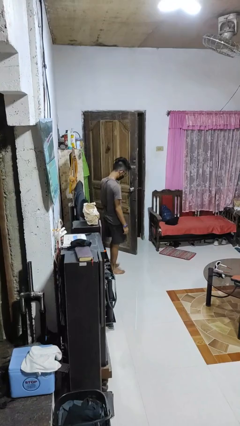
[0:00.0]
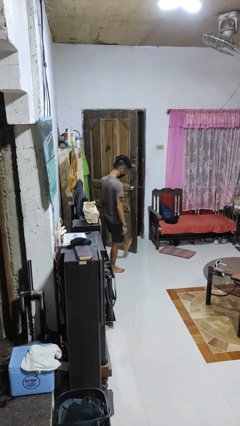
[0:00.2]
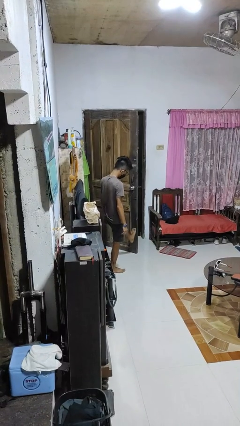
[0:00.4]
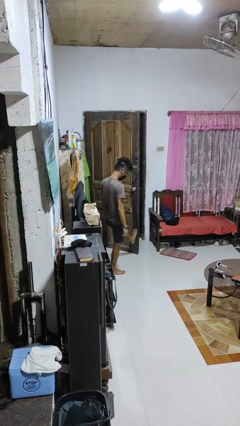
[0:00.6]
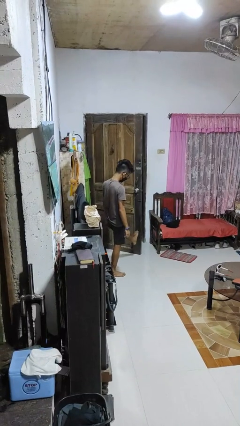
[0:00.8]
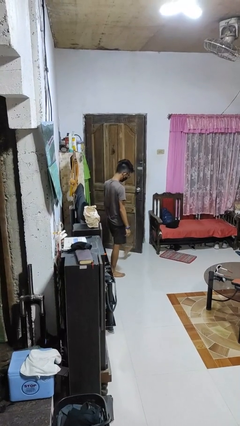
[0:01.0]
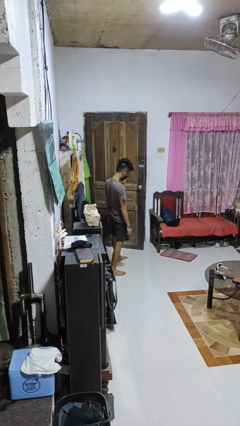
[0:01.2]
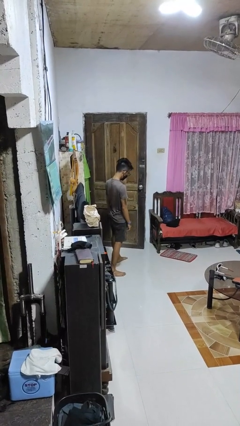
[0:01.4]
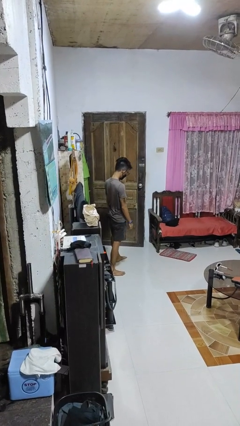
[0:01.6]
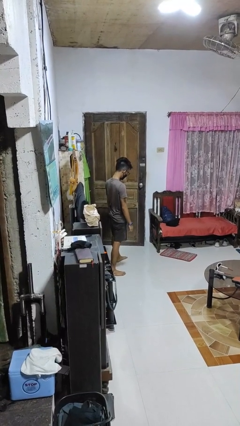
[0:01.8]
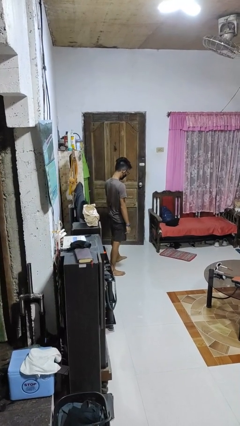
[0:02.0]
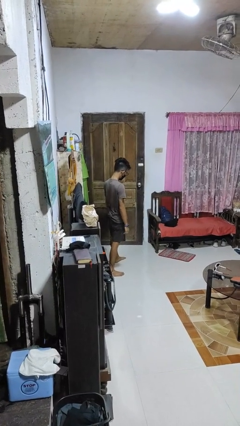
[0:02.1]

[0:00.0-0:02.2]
person closes door with foot

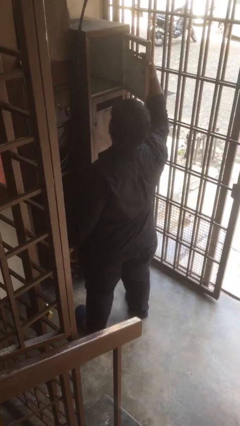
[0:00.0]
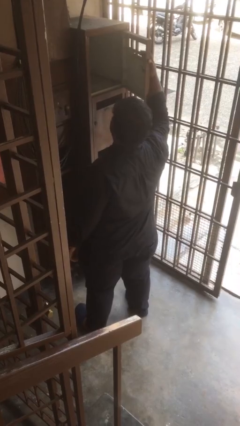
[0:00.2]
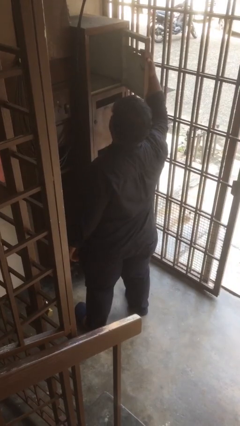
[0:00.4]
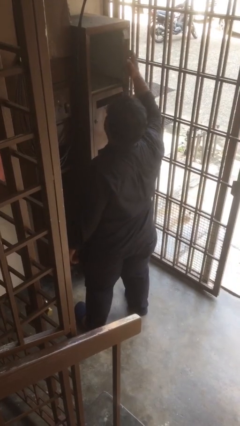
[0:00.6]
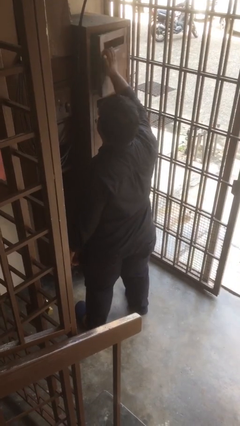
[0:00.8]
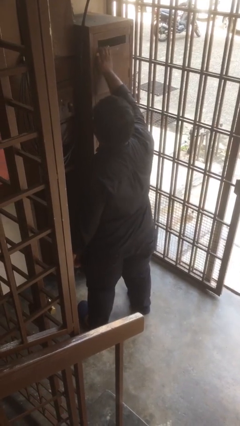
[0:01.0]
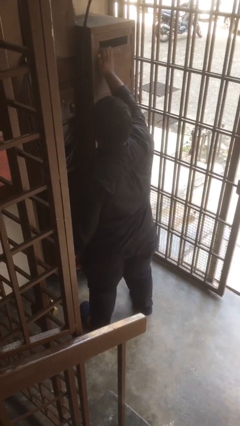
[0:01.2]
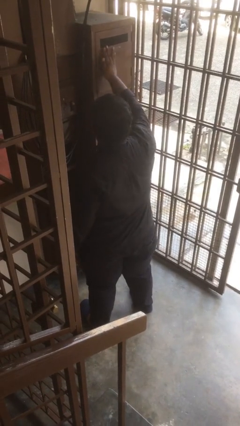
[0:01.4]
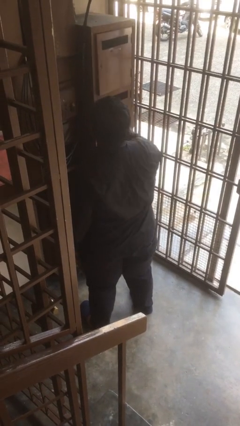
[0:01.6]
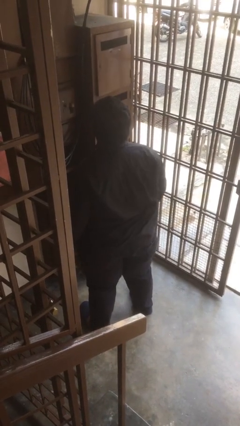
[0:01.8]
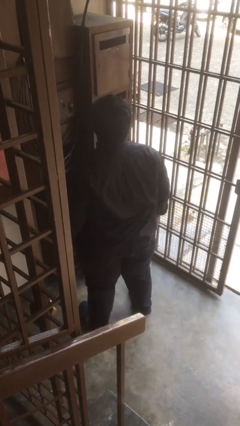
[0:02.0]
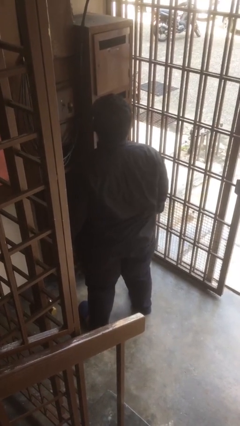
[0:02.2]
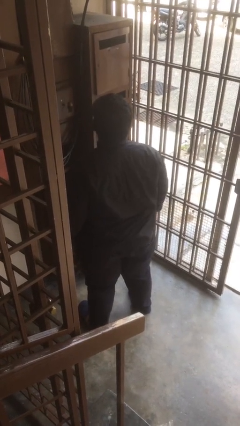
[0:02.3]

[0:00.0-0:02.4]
person closes mailbox

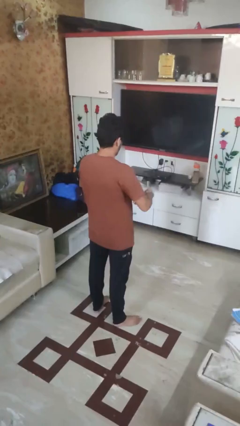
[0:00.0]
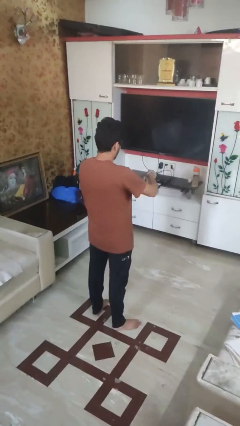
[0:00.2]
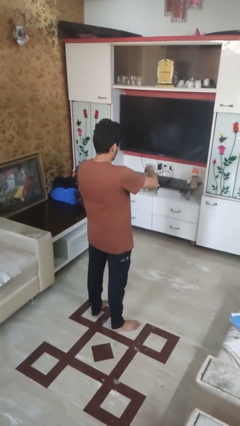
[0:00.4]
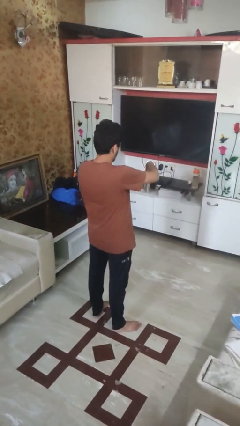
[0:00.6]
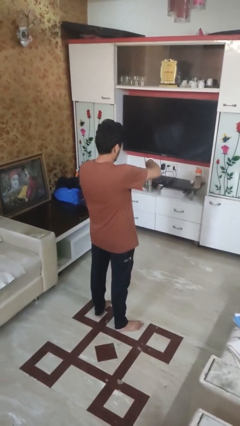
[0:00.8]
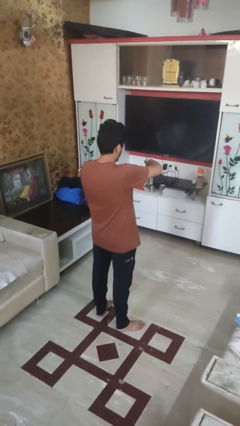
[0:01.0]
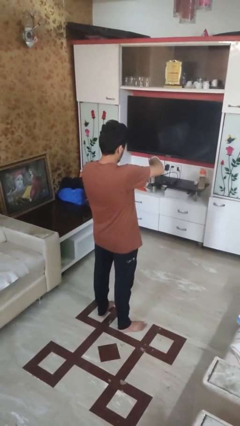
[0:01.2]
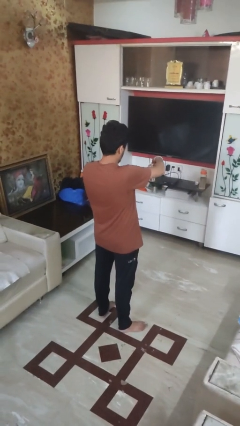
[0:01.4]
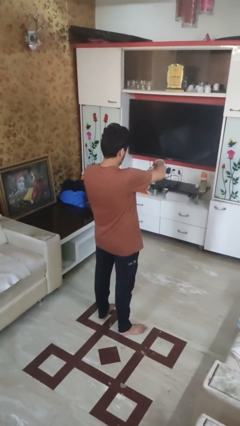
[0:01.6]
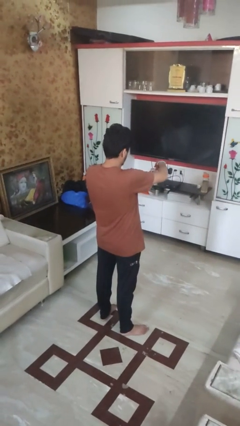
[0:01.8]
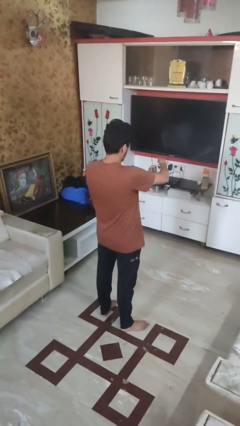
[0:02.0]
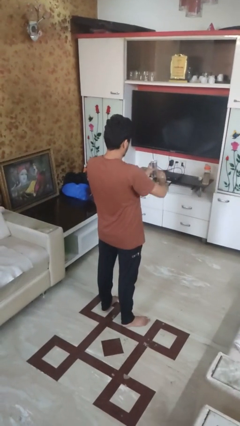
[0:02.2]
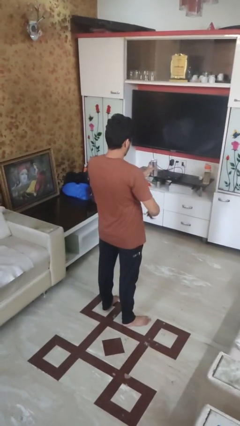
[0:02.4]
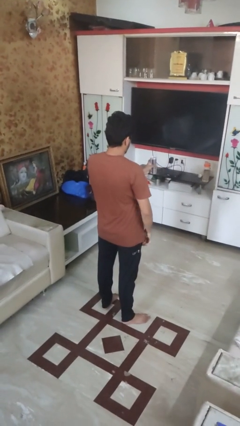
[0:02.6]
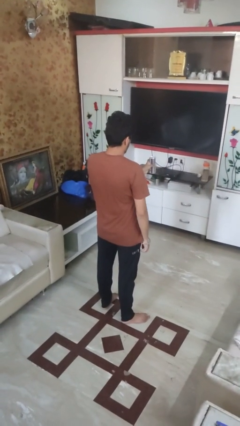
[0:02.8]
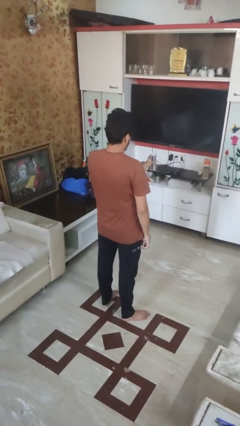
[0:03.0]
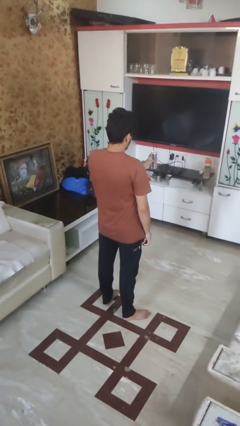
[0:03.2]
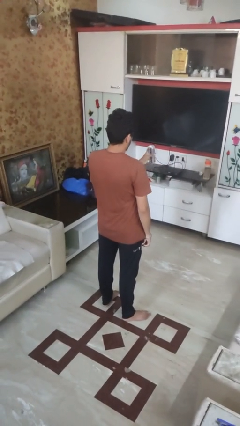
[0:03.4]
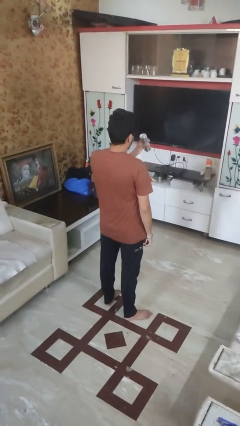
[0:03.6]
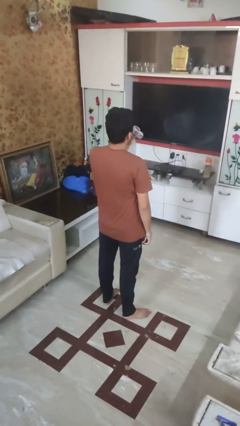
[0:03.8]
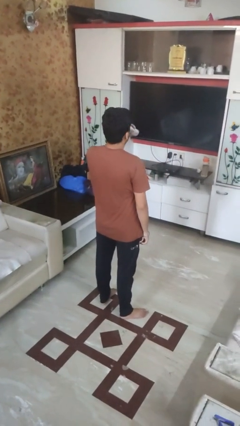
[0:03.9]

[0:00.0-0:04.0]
person opens beverage can

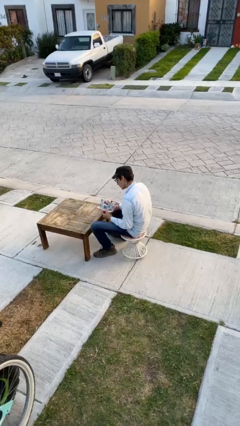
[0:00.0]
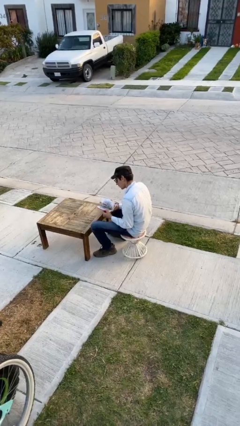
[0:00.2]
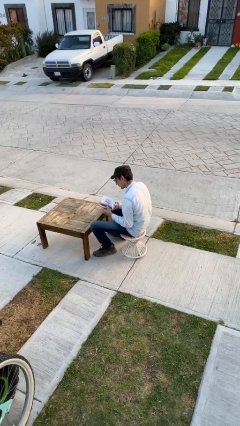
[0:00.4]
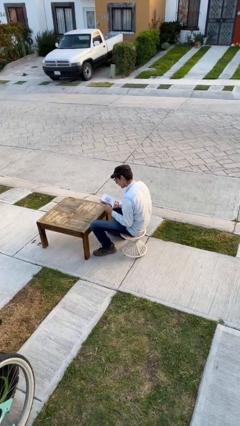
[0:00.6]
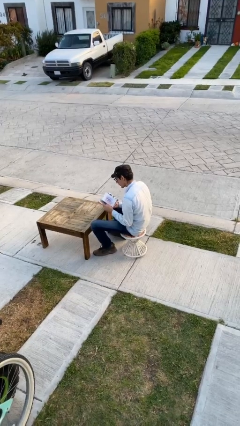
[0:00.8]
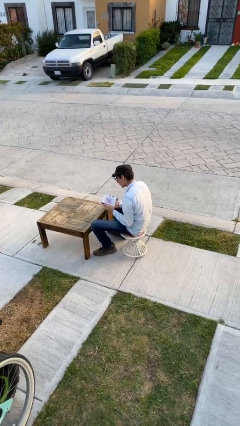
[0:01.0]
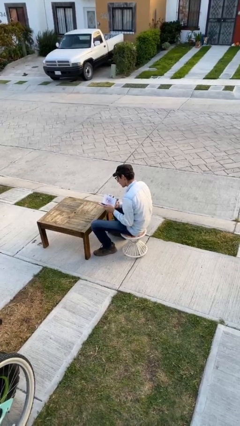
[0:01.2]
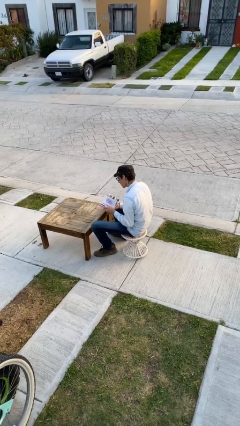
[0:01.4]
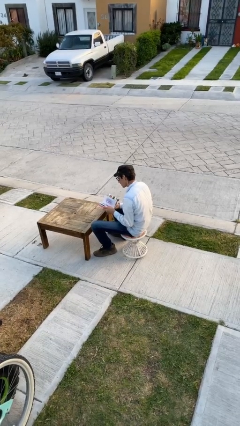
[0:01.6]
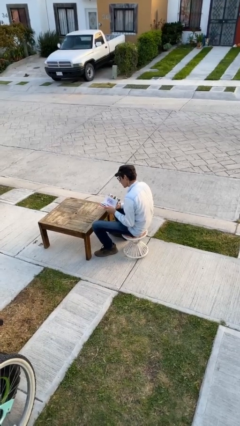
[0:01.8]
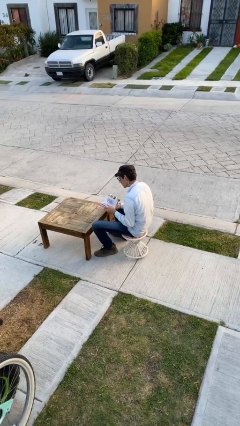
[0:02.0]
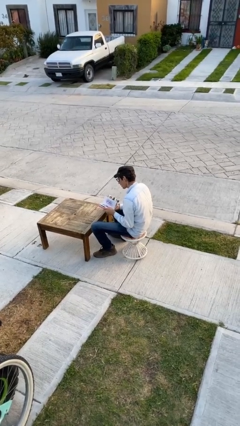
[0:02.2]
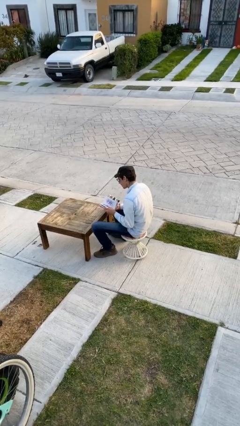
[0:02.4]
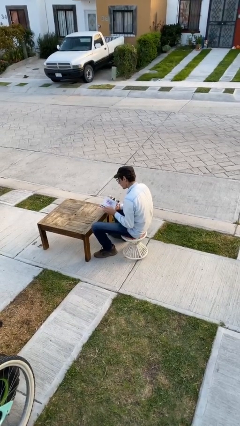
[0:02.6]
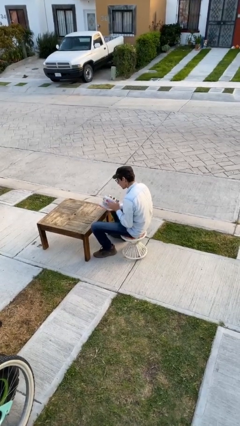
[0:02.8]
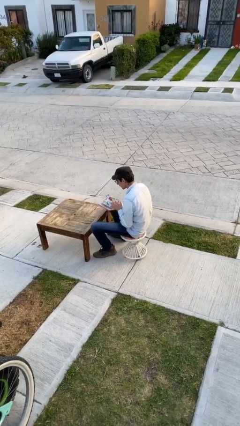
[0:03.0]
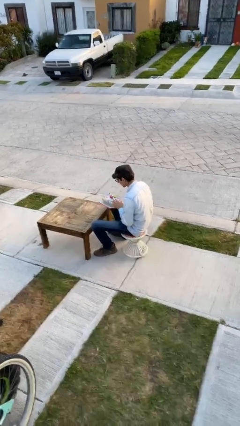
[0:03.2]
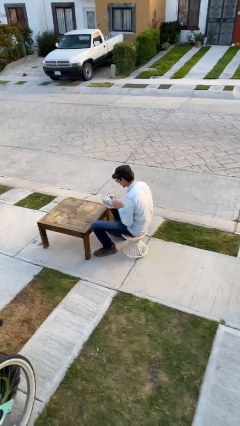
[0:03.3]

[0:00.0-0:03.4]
person reads document

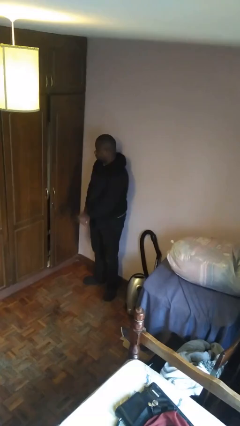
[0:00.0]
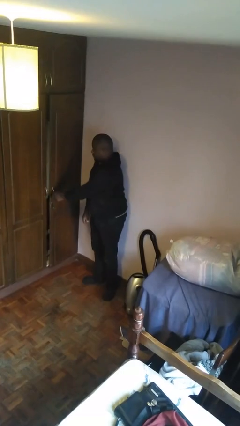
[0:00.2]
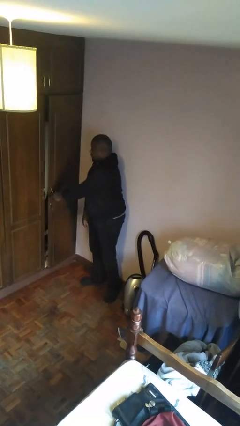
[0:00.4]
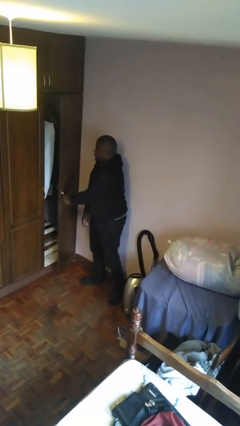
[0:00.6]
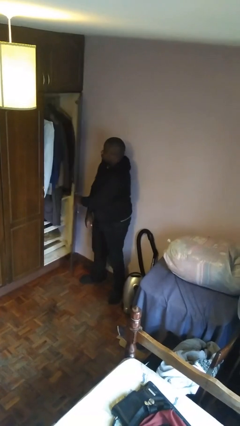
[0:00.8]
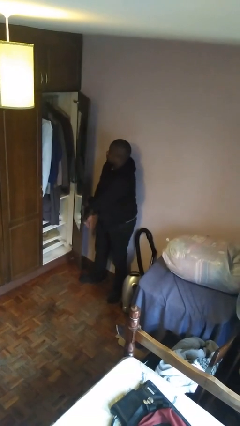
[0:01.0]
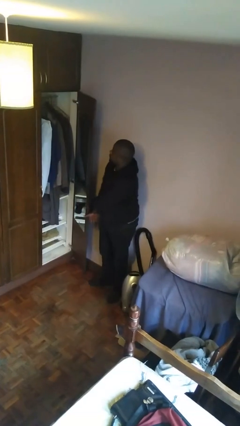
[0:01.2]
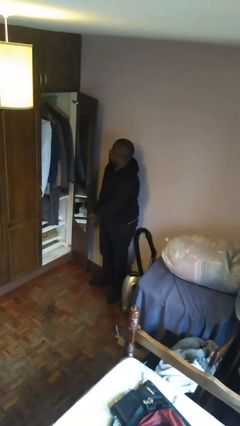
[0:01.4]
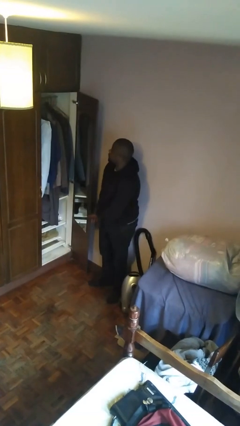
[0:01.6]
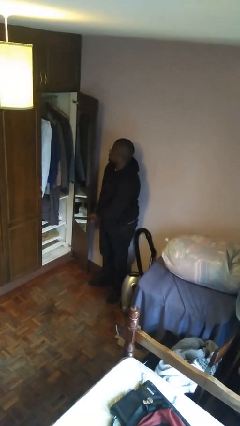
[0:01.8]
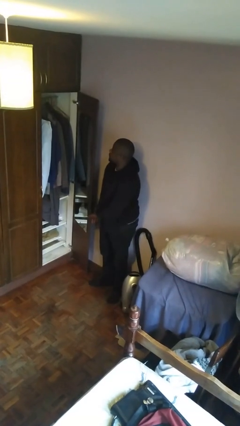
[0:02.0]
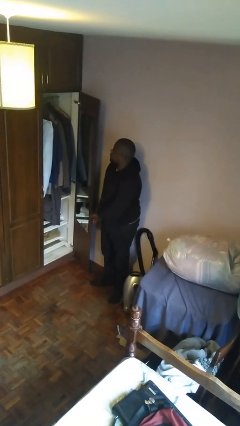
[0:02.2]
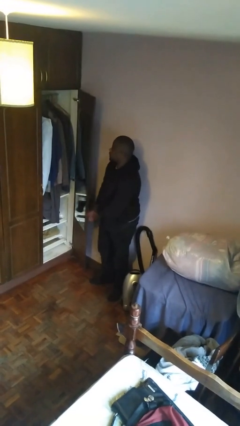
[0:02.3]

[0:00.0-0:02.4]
person opens closet door

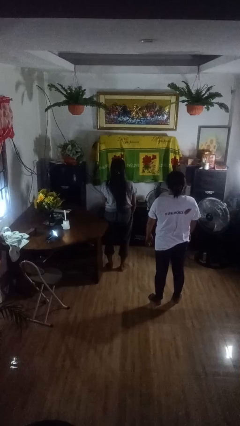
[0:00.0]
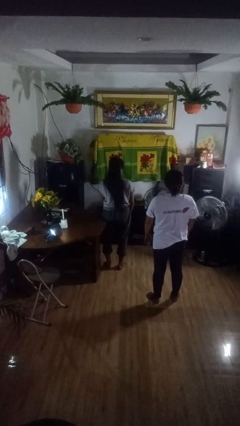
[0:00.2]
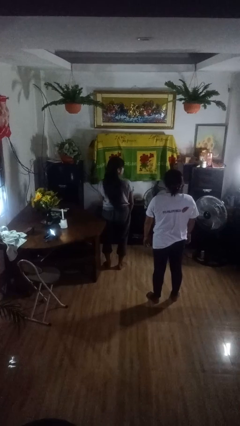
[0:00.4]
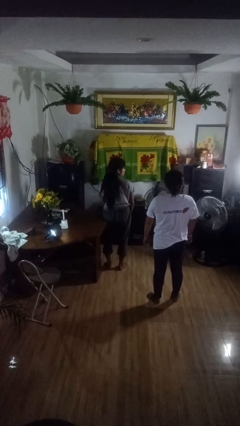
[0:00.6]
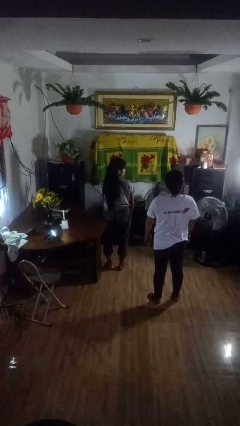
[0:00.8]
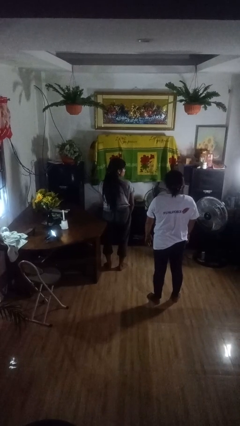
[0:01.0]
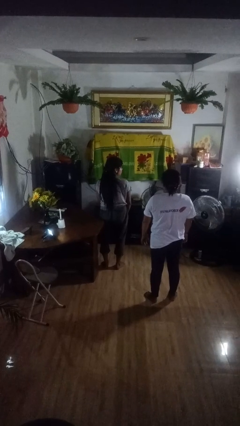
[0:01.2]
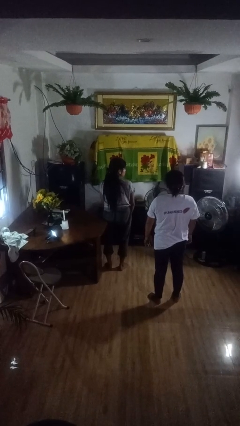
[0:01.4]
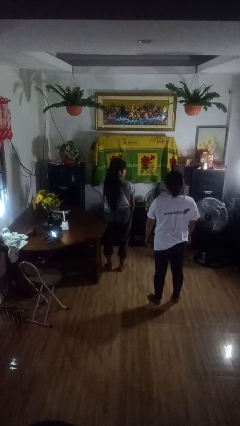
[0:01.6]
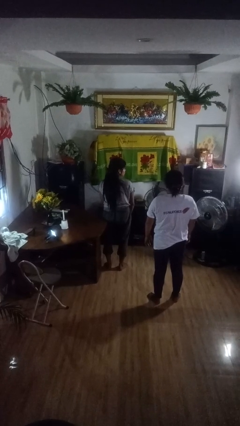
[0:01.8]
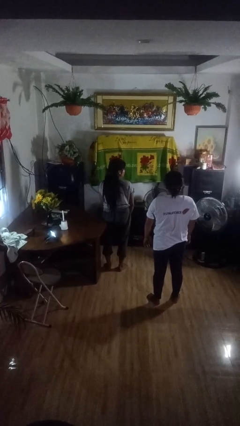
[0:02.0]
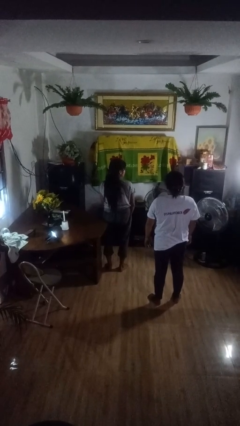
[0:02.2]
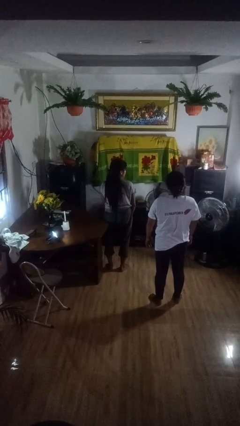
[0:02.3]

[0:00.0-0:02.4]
person looks over shoulder

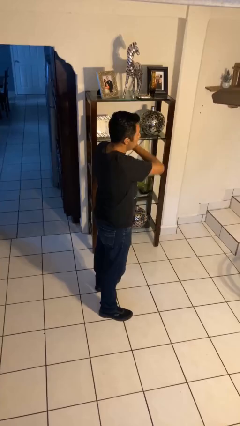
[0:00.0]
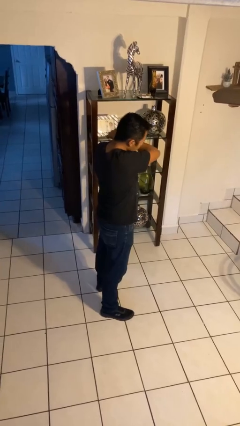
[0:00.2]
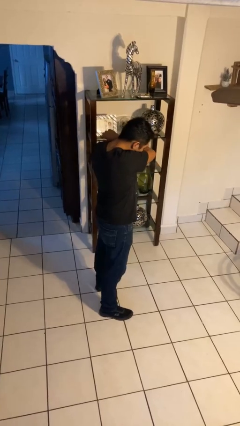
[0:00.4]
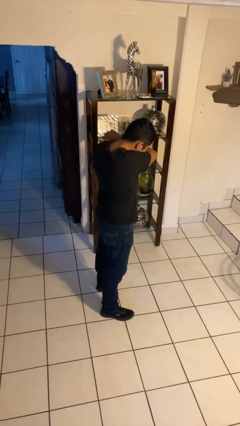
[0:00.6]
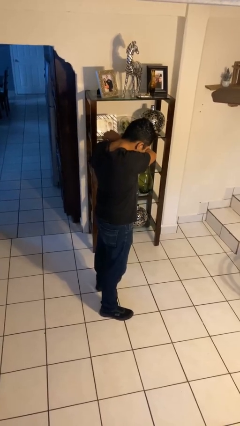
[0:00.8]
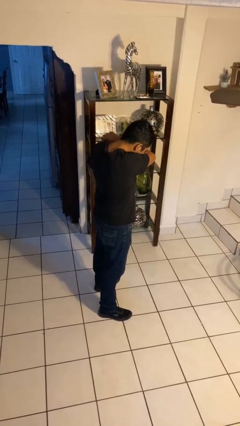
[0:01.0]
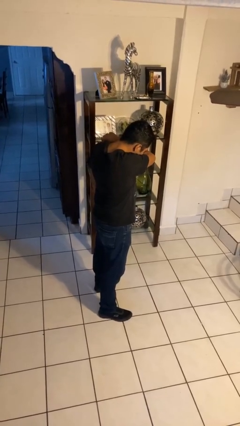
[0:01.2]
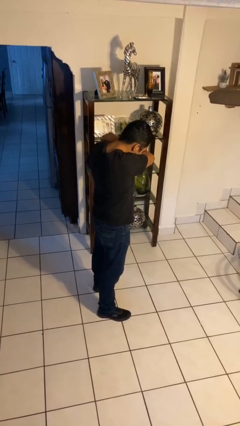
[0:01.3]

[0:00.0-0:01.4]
person sneezes into arm
